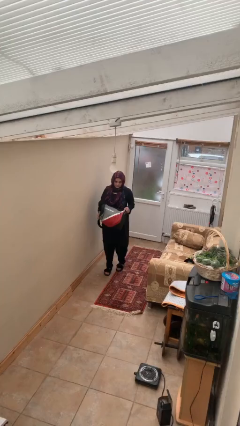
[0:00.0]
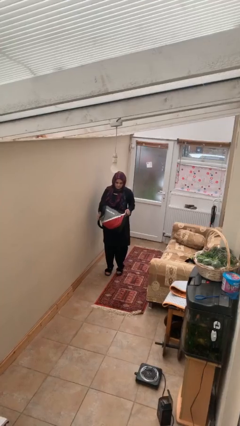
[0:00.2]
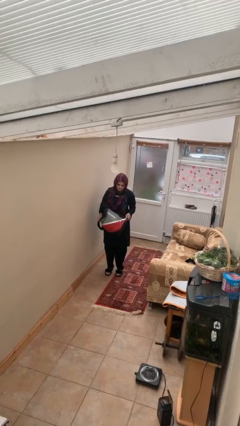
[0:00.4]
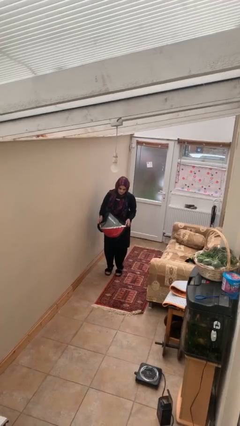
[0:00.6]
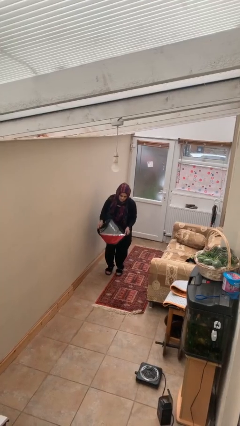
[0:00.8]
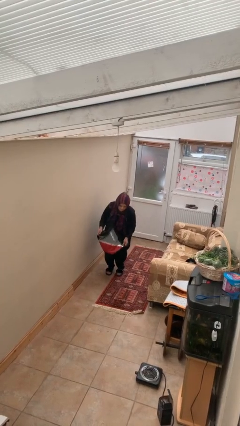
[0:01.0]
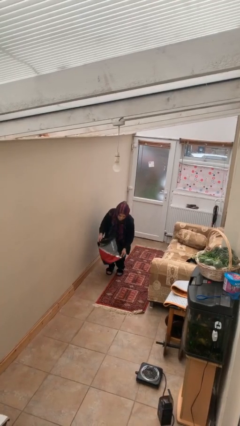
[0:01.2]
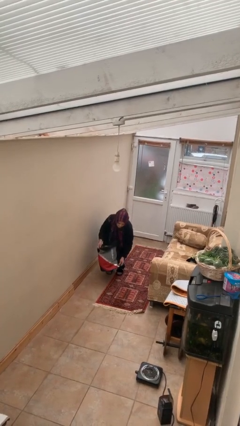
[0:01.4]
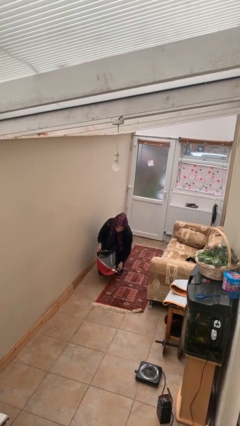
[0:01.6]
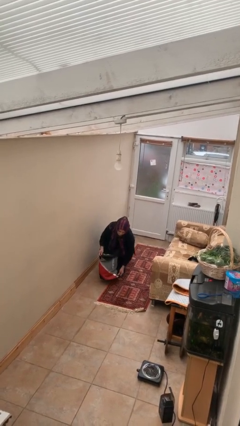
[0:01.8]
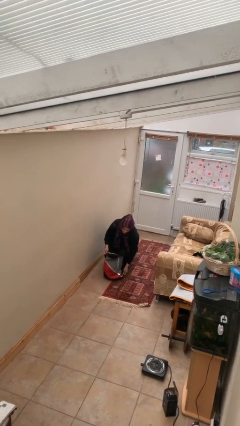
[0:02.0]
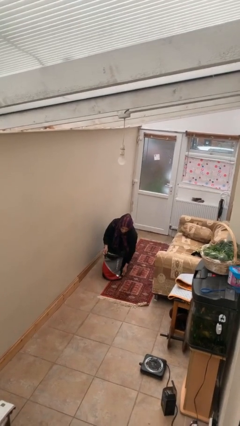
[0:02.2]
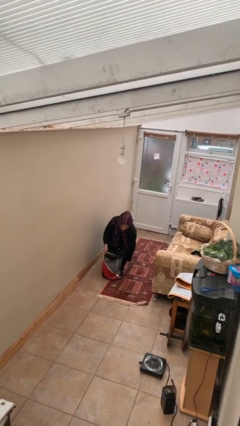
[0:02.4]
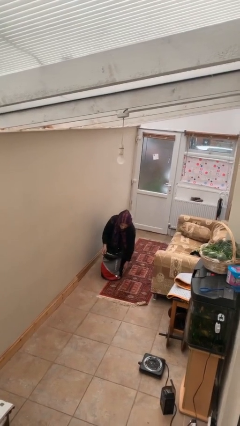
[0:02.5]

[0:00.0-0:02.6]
person puts down object on floor

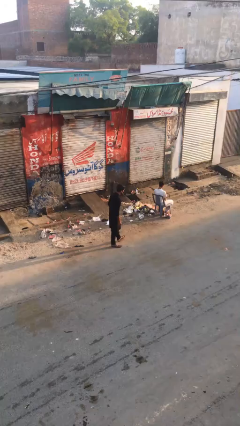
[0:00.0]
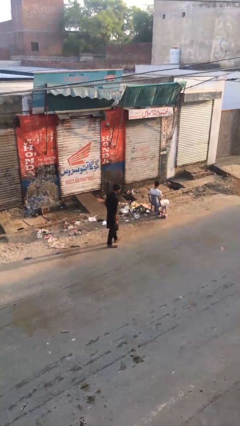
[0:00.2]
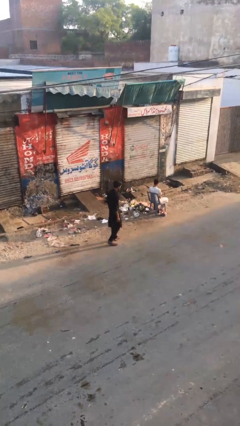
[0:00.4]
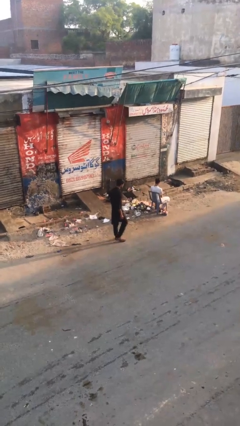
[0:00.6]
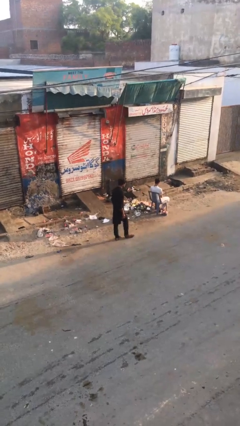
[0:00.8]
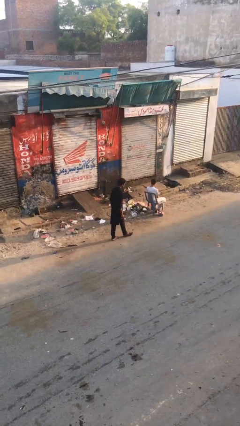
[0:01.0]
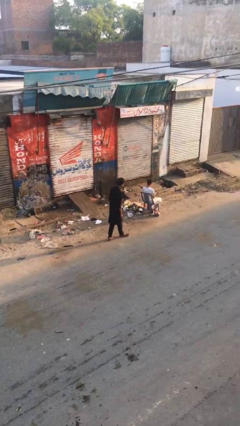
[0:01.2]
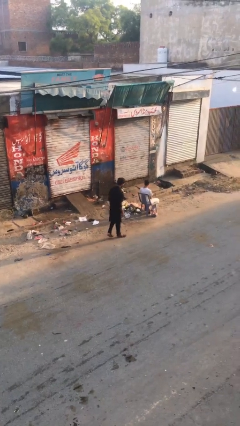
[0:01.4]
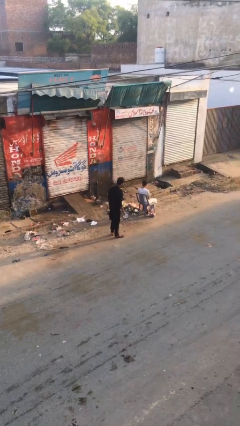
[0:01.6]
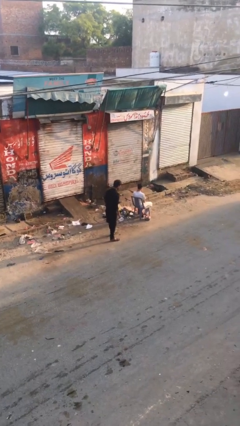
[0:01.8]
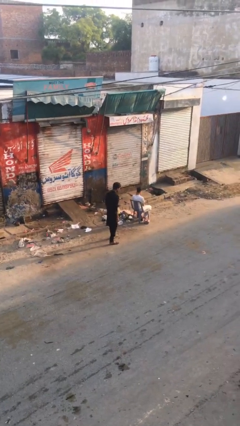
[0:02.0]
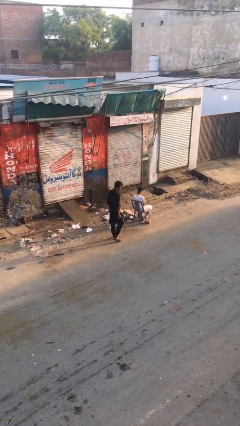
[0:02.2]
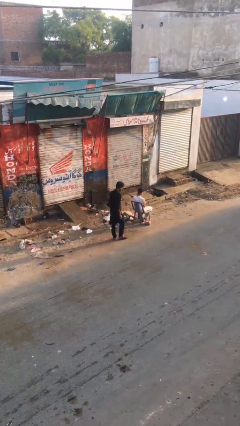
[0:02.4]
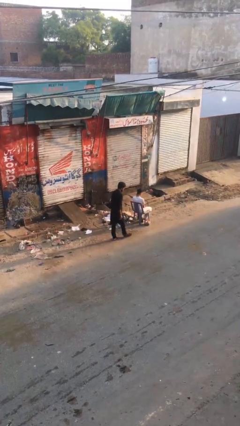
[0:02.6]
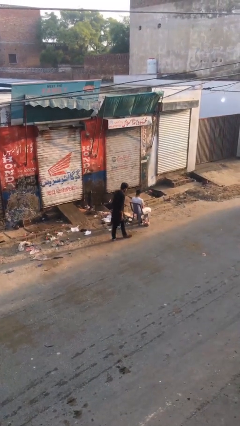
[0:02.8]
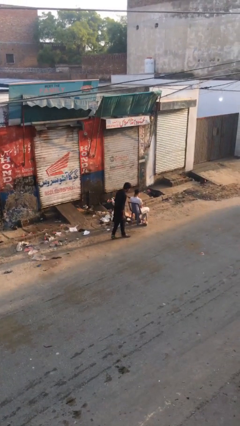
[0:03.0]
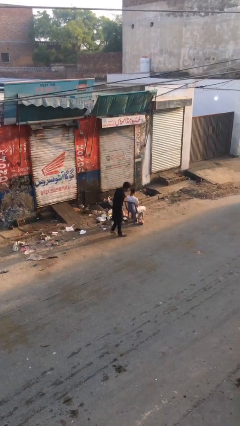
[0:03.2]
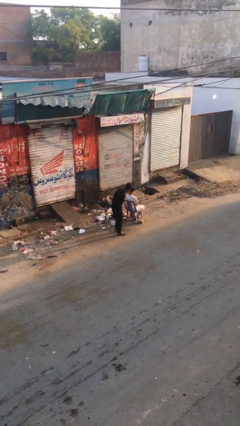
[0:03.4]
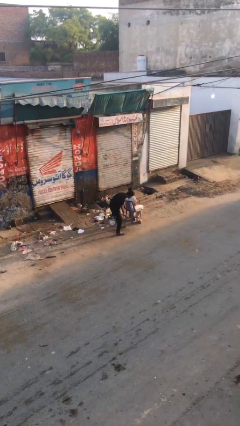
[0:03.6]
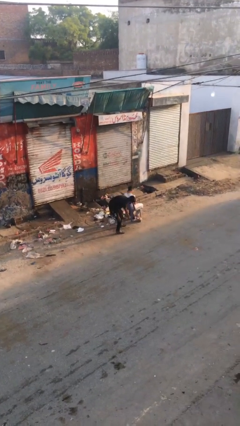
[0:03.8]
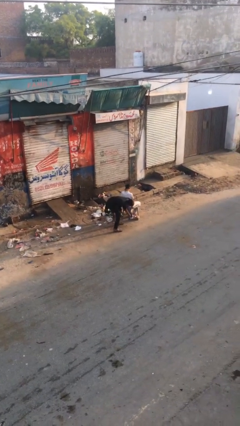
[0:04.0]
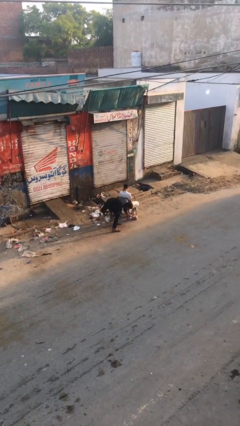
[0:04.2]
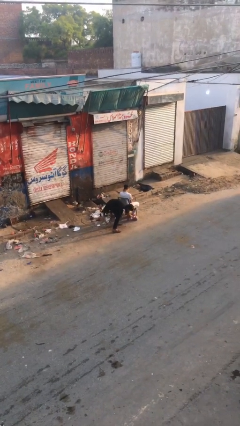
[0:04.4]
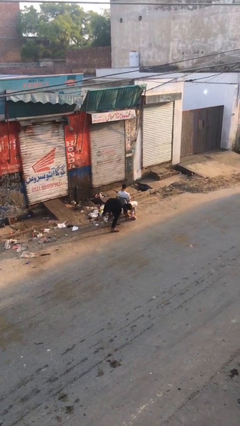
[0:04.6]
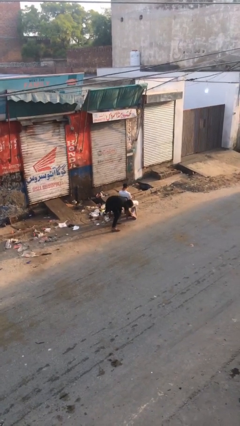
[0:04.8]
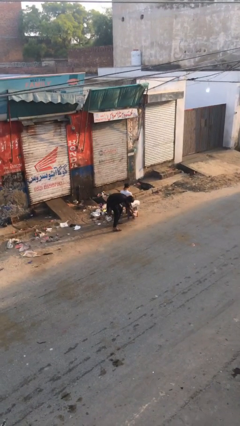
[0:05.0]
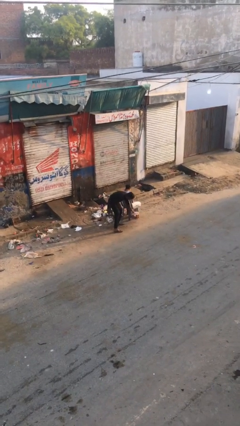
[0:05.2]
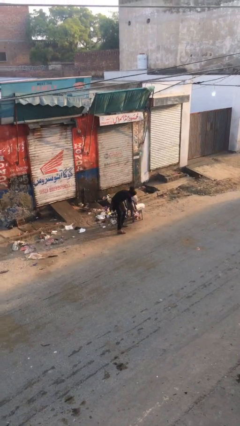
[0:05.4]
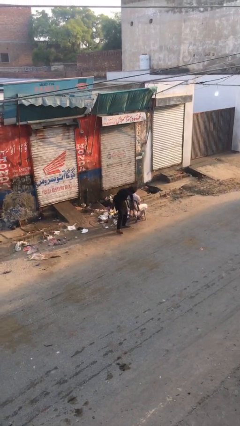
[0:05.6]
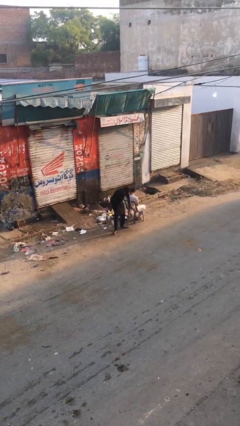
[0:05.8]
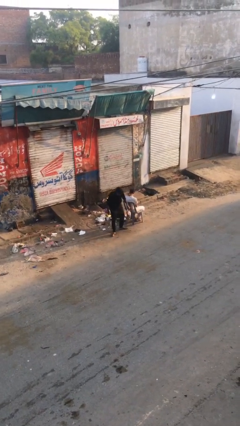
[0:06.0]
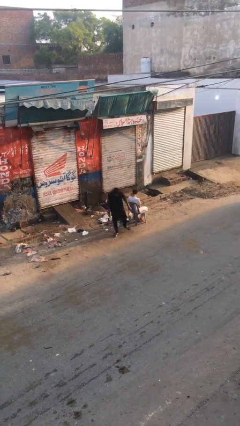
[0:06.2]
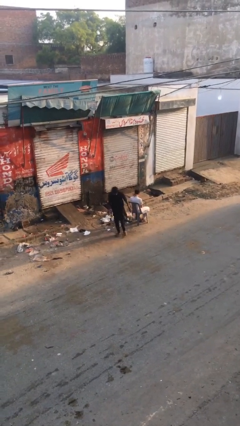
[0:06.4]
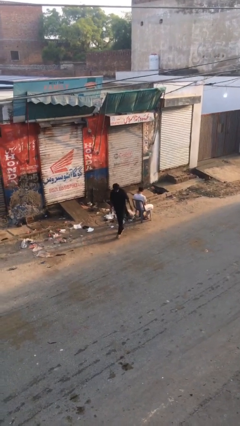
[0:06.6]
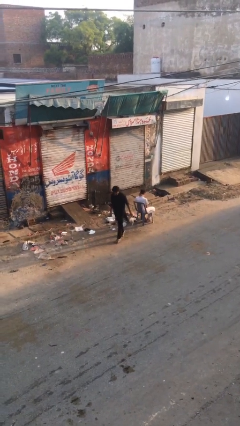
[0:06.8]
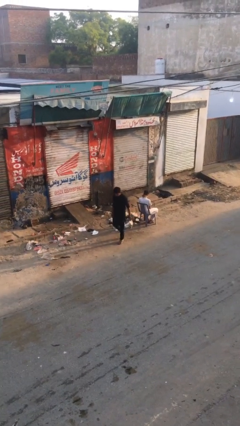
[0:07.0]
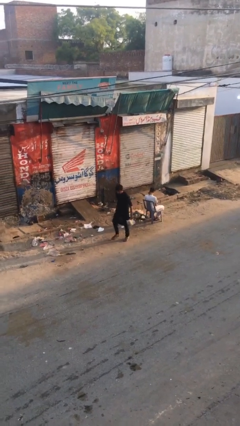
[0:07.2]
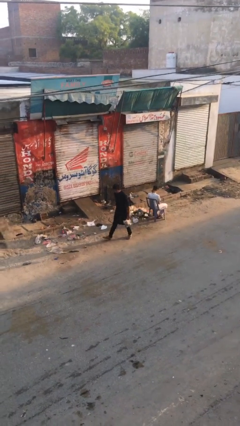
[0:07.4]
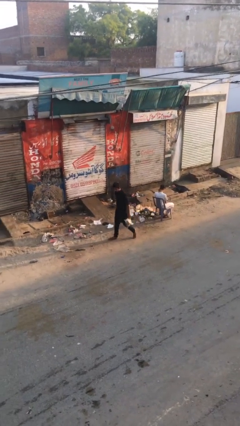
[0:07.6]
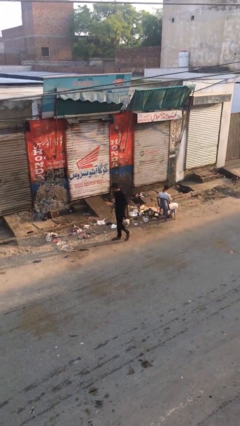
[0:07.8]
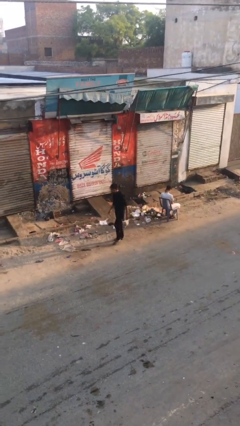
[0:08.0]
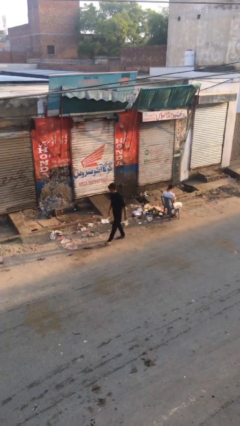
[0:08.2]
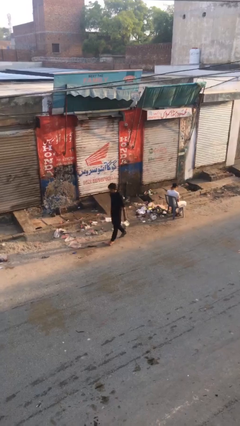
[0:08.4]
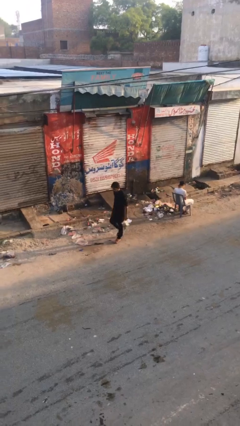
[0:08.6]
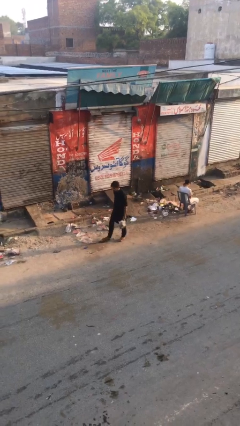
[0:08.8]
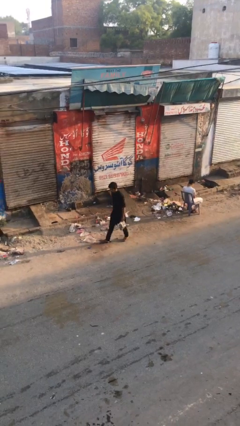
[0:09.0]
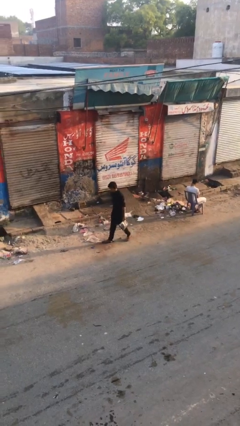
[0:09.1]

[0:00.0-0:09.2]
person steals object from person

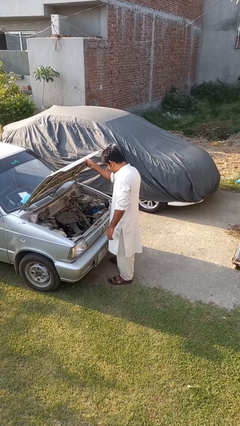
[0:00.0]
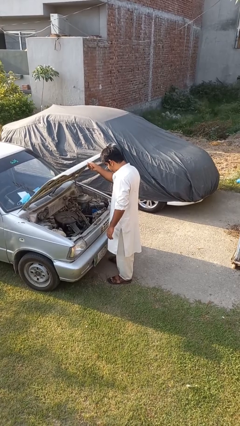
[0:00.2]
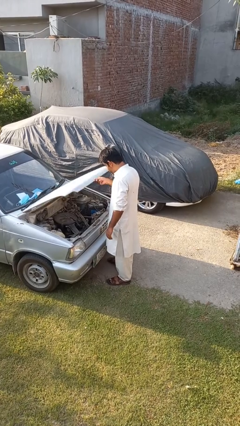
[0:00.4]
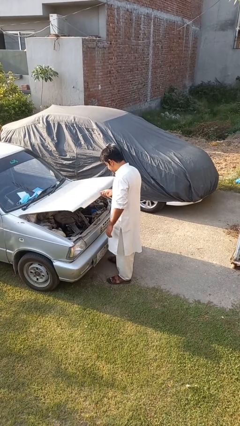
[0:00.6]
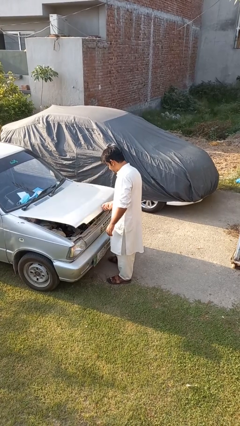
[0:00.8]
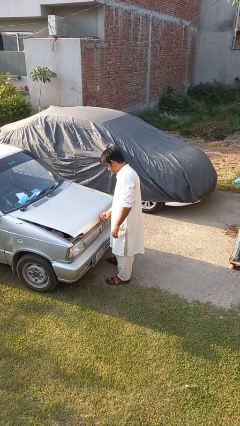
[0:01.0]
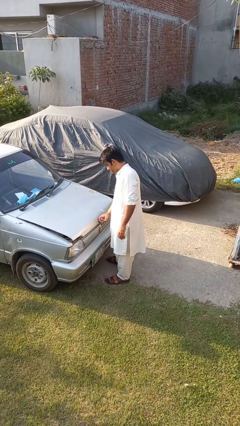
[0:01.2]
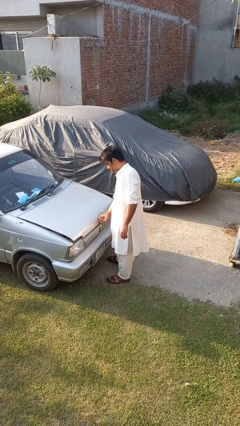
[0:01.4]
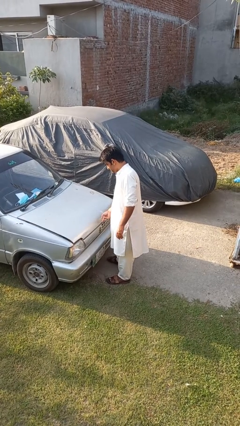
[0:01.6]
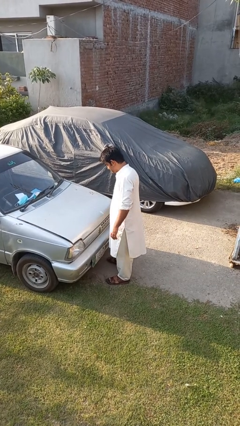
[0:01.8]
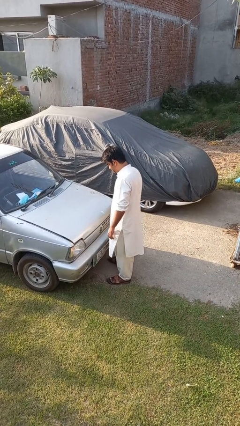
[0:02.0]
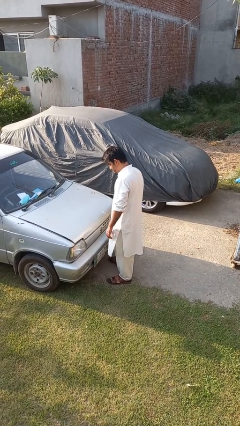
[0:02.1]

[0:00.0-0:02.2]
person closes car hood

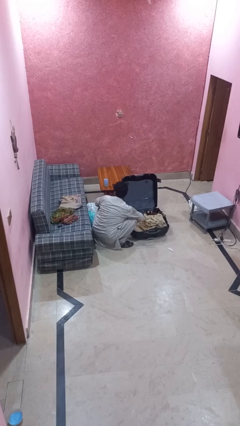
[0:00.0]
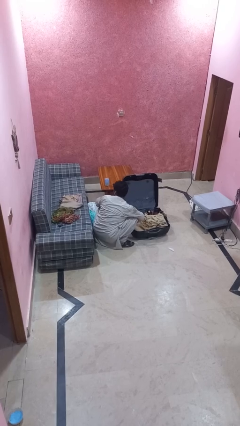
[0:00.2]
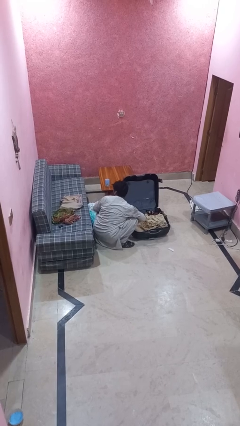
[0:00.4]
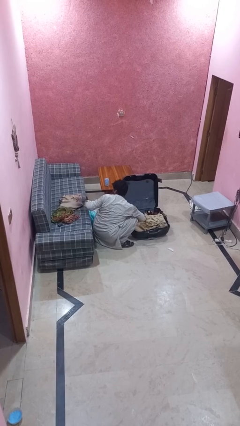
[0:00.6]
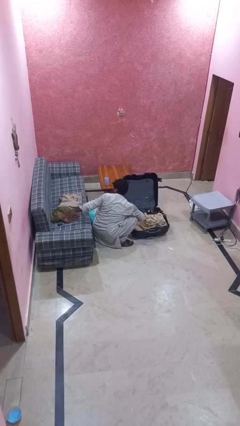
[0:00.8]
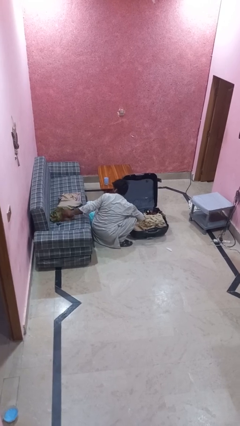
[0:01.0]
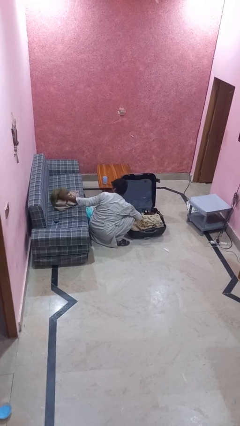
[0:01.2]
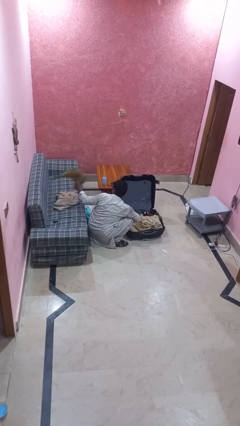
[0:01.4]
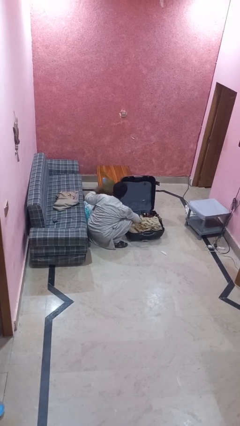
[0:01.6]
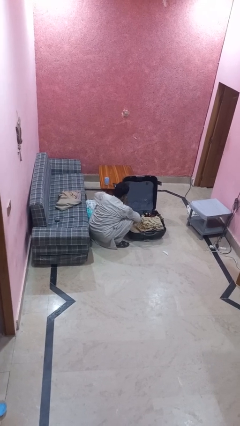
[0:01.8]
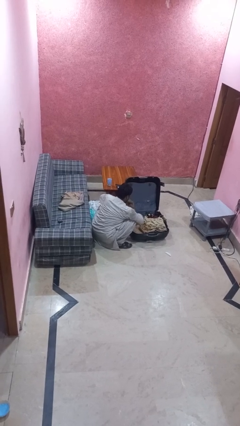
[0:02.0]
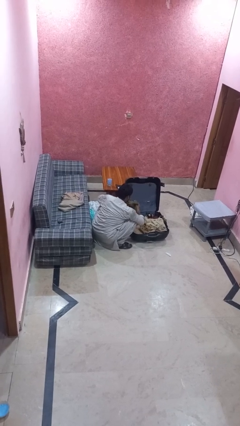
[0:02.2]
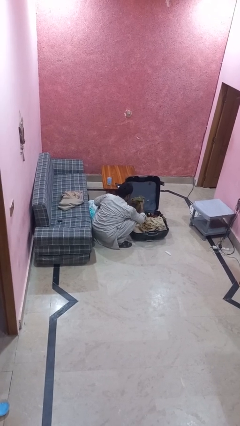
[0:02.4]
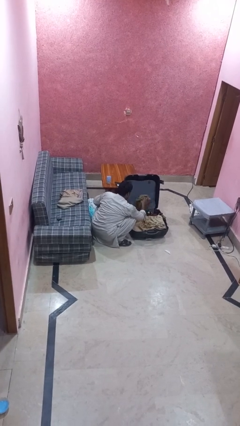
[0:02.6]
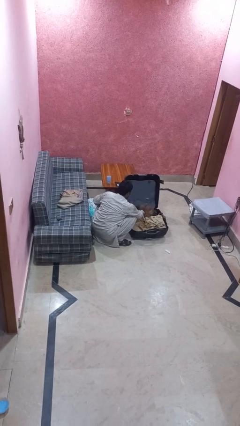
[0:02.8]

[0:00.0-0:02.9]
person loads clothes into suitcase

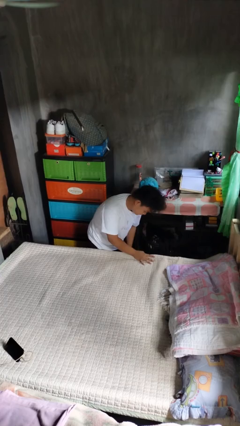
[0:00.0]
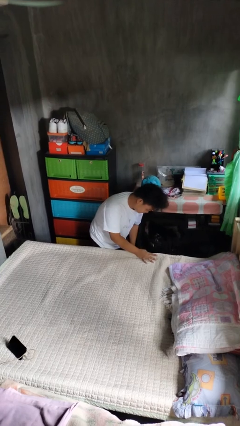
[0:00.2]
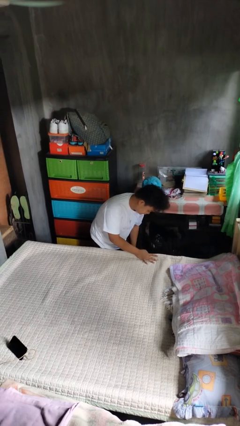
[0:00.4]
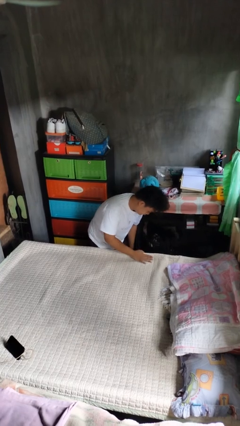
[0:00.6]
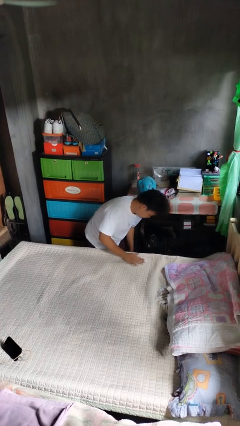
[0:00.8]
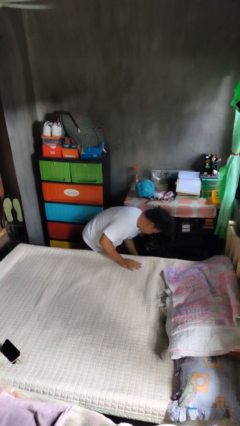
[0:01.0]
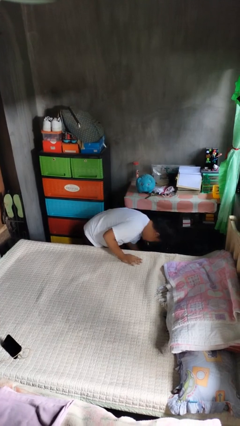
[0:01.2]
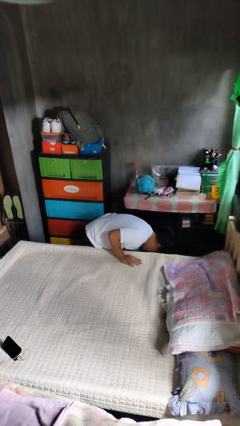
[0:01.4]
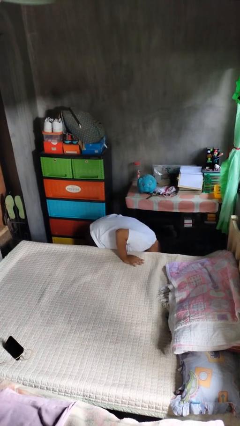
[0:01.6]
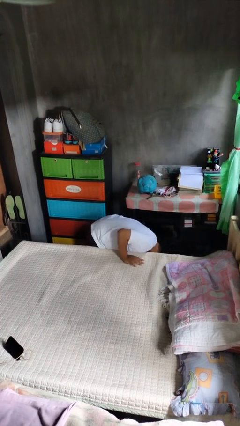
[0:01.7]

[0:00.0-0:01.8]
person searches under bed
